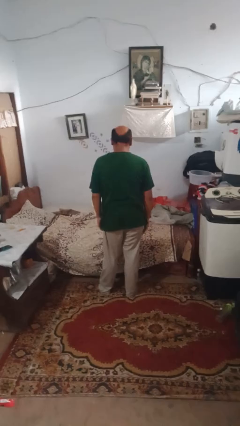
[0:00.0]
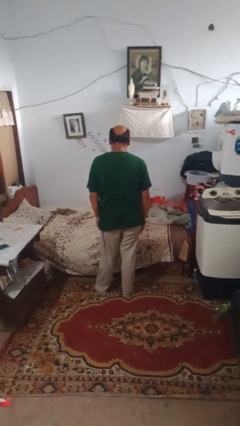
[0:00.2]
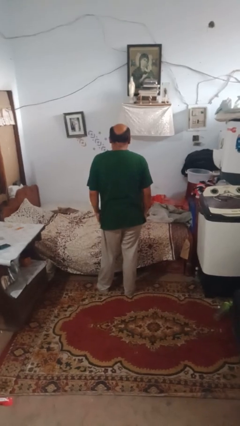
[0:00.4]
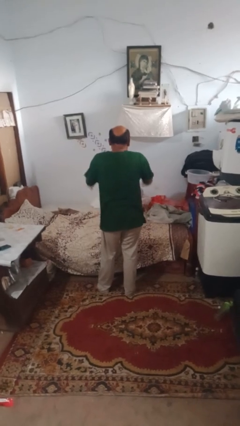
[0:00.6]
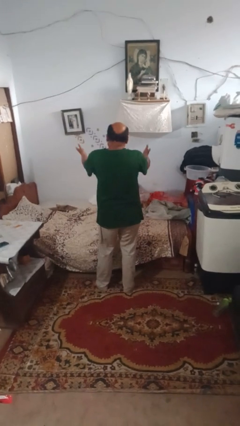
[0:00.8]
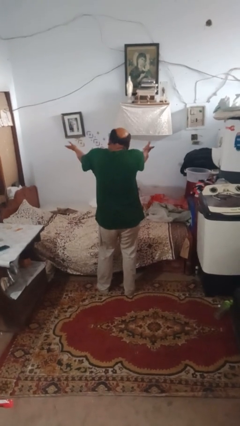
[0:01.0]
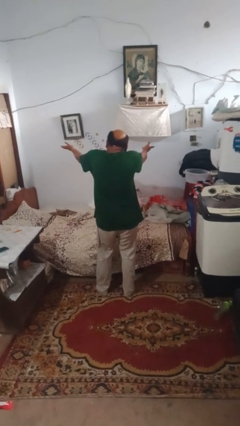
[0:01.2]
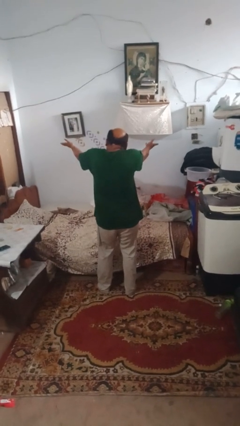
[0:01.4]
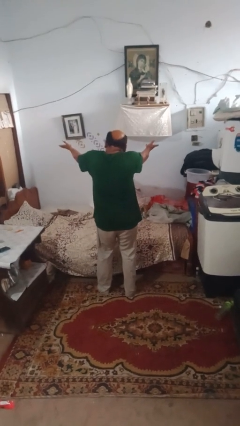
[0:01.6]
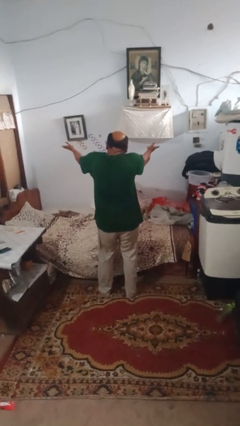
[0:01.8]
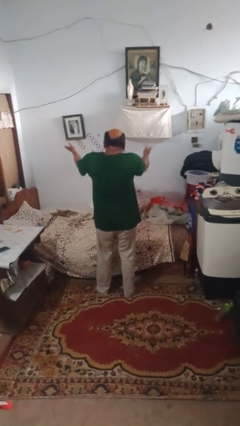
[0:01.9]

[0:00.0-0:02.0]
person shrugs

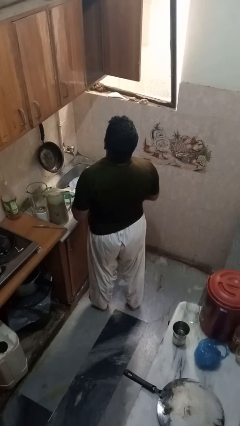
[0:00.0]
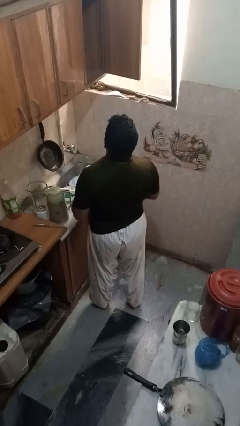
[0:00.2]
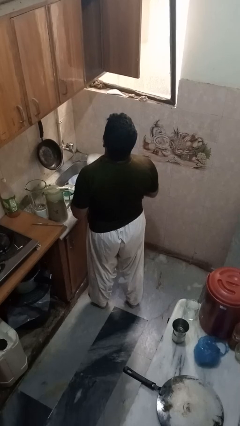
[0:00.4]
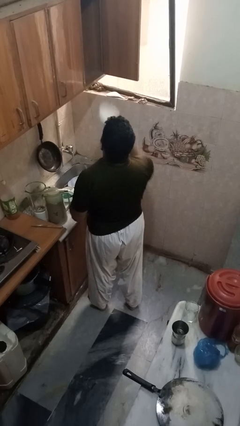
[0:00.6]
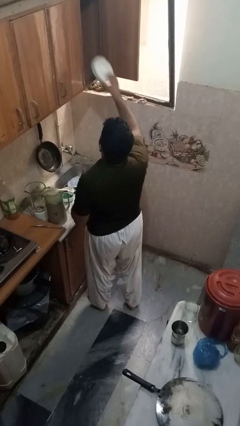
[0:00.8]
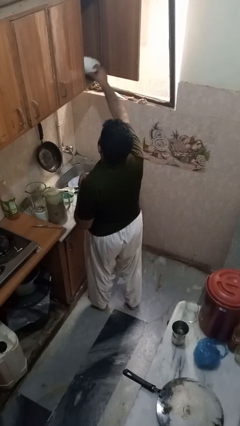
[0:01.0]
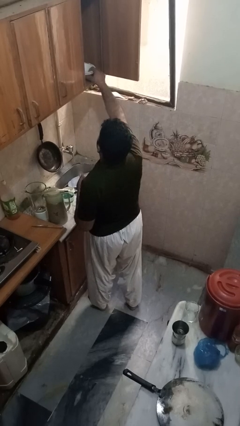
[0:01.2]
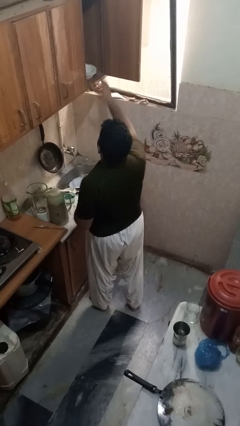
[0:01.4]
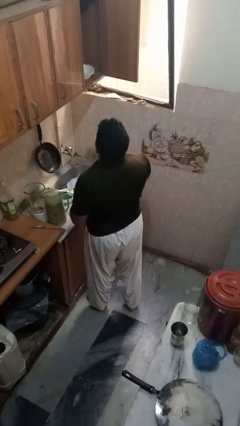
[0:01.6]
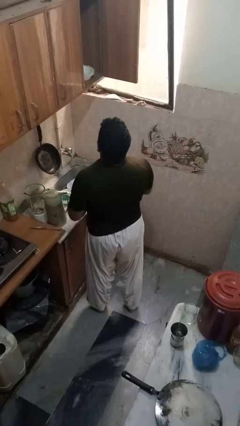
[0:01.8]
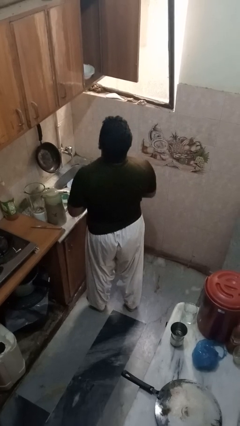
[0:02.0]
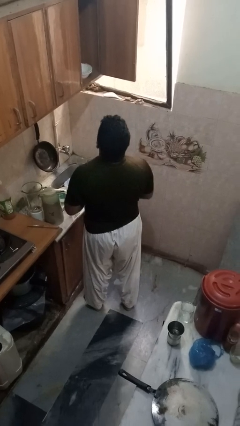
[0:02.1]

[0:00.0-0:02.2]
person puts object in cabinet

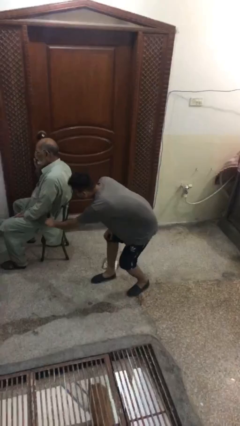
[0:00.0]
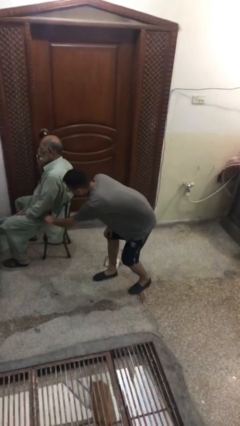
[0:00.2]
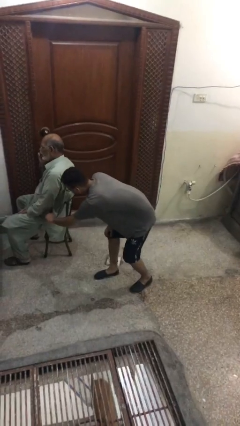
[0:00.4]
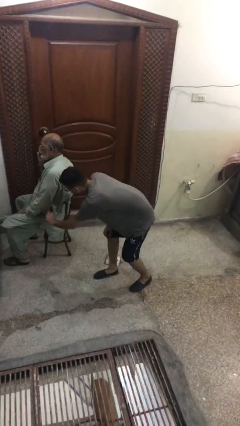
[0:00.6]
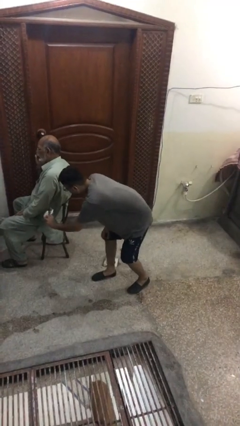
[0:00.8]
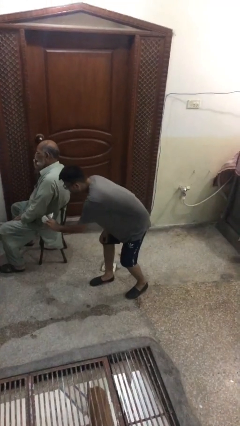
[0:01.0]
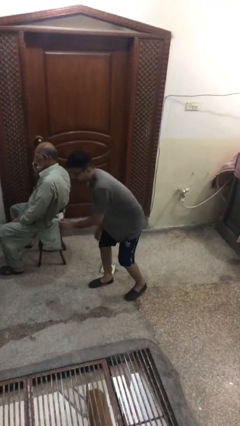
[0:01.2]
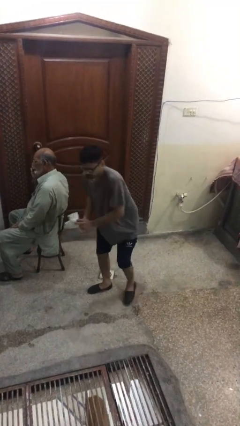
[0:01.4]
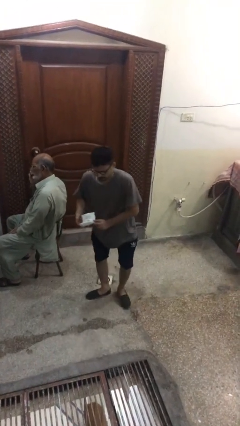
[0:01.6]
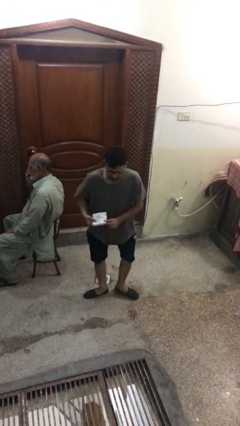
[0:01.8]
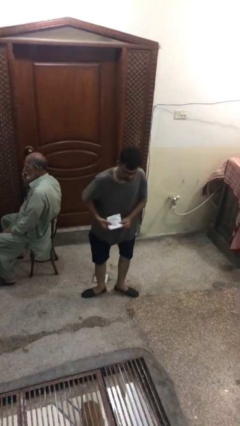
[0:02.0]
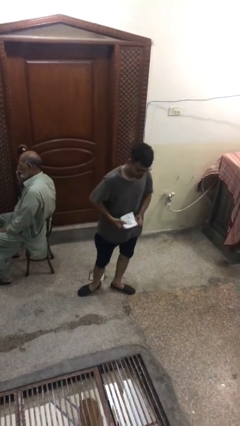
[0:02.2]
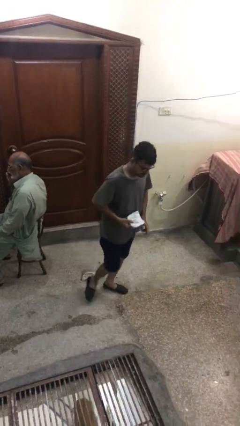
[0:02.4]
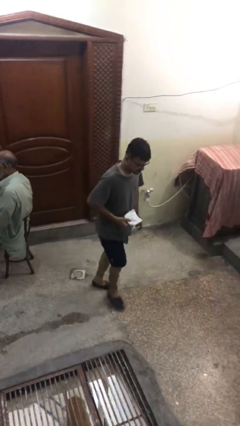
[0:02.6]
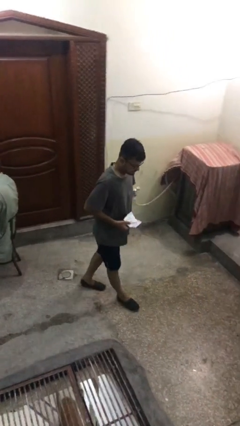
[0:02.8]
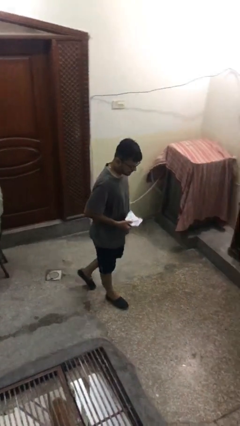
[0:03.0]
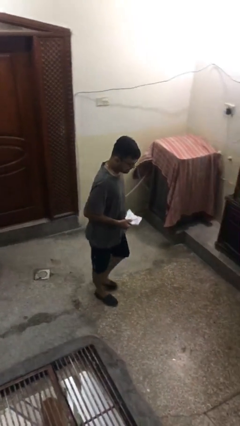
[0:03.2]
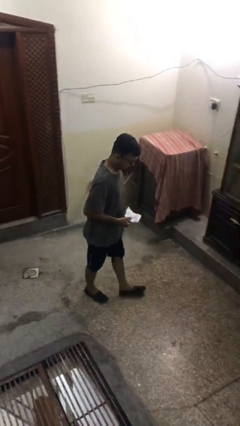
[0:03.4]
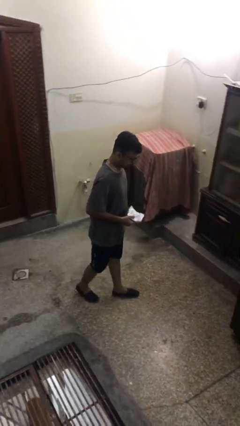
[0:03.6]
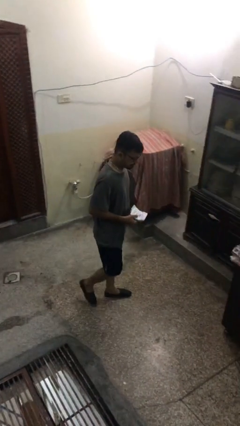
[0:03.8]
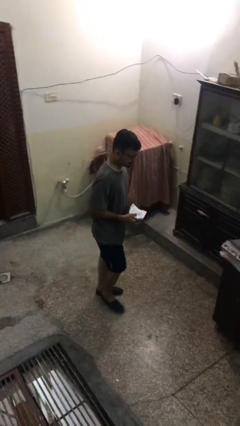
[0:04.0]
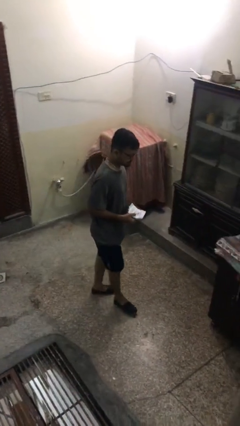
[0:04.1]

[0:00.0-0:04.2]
person steals object from person

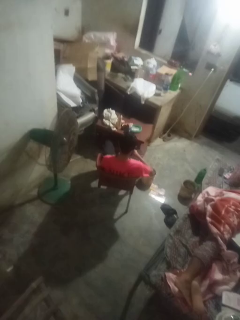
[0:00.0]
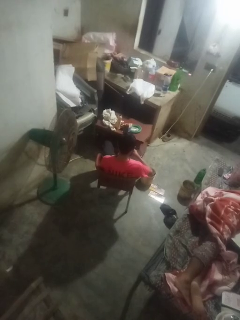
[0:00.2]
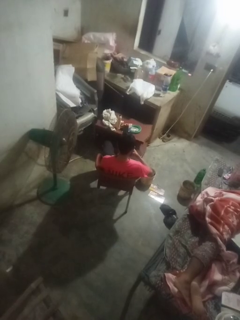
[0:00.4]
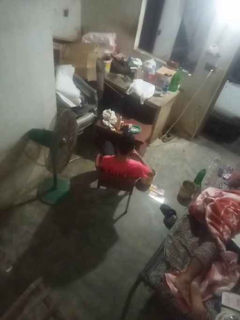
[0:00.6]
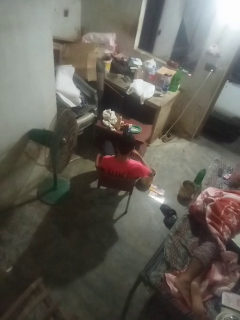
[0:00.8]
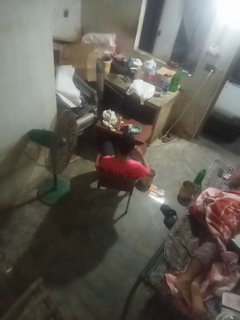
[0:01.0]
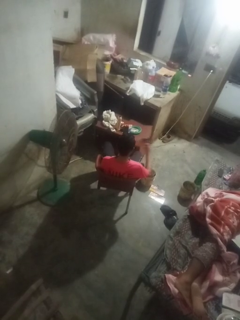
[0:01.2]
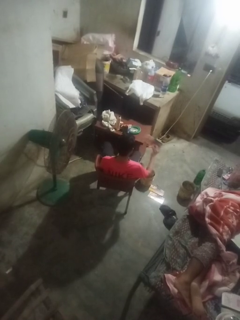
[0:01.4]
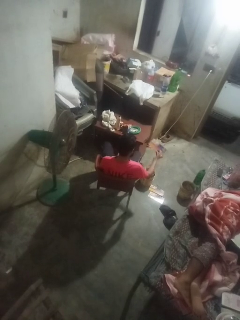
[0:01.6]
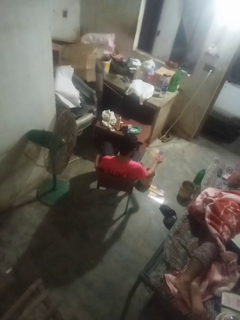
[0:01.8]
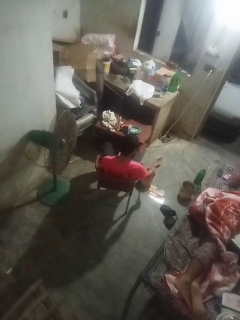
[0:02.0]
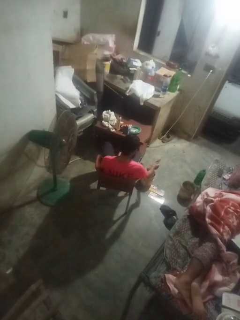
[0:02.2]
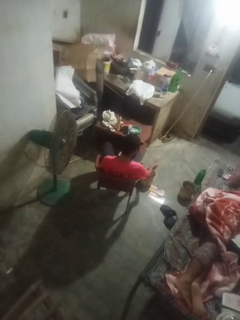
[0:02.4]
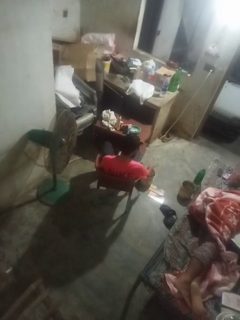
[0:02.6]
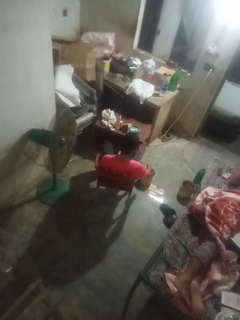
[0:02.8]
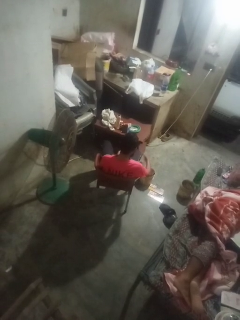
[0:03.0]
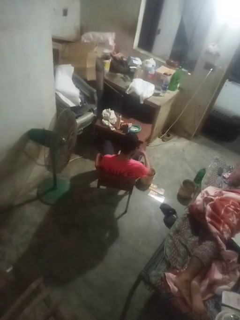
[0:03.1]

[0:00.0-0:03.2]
person discards trash

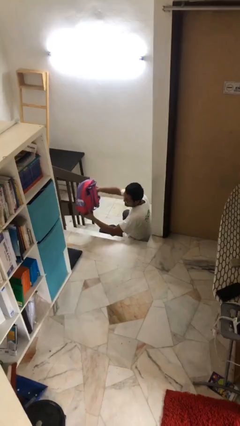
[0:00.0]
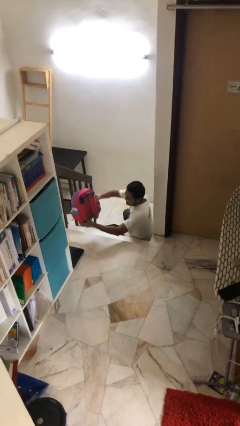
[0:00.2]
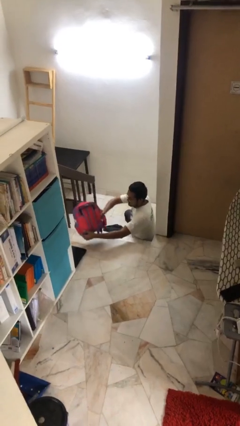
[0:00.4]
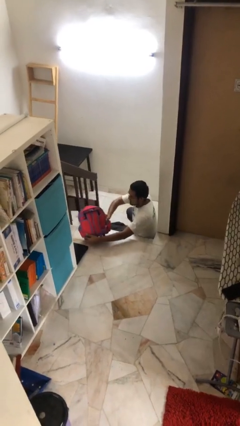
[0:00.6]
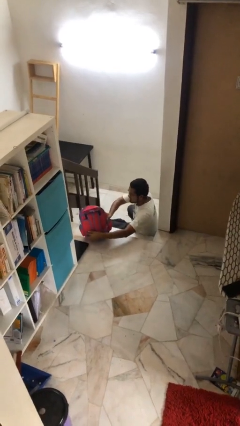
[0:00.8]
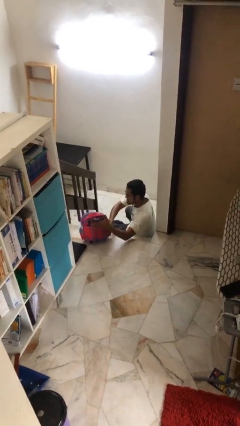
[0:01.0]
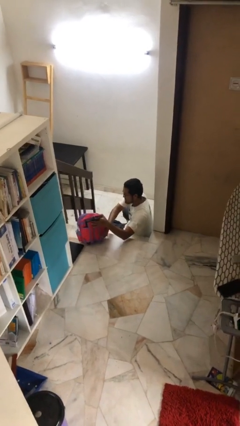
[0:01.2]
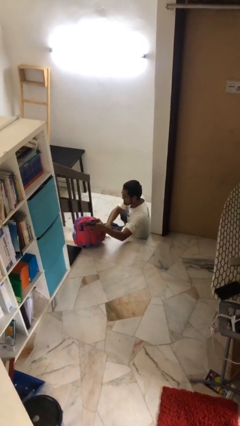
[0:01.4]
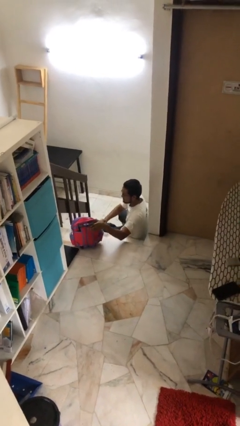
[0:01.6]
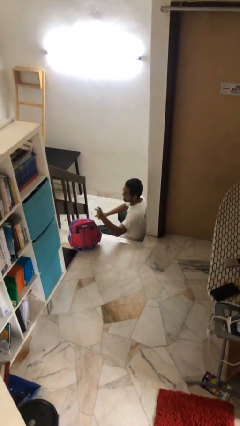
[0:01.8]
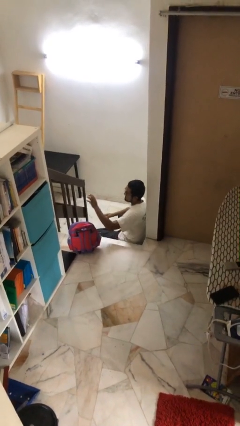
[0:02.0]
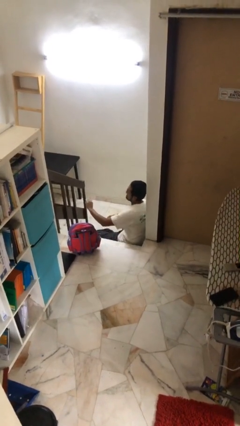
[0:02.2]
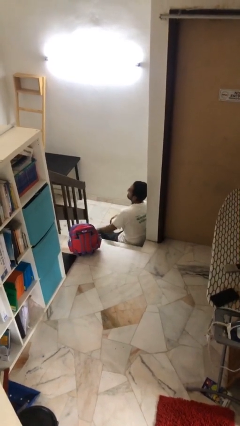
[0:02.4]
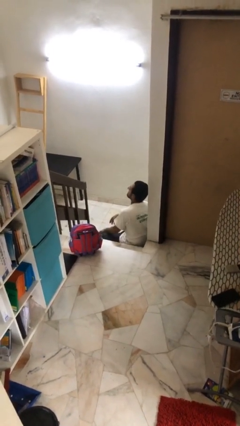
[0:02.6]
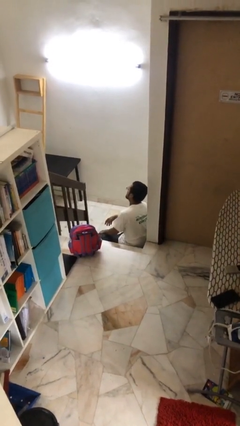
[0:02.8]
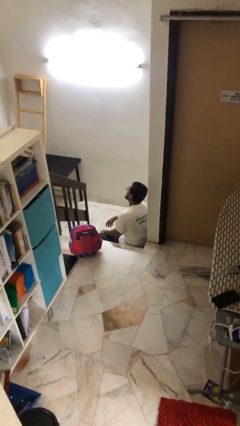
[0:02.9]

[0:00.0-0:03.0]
person puts down object on floor

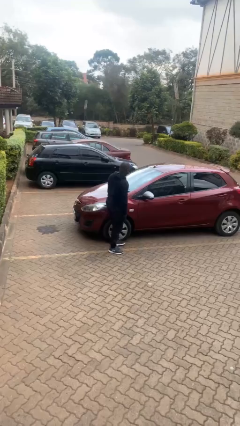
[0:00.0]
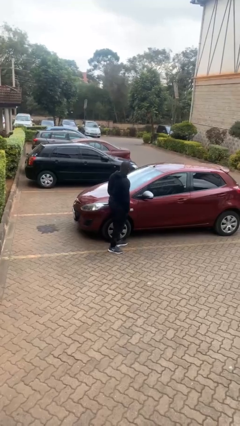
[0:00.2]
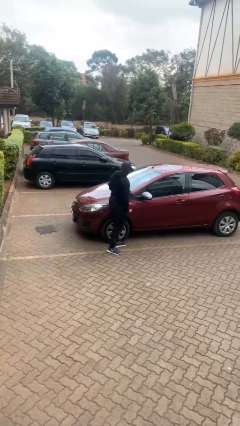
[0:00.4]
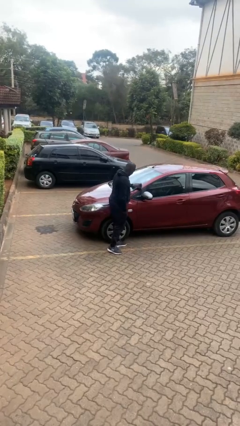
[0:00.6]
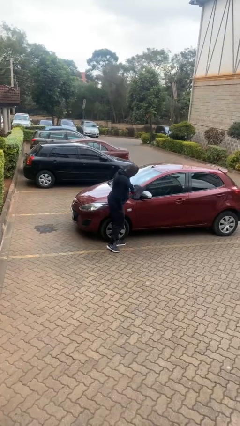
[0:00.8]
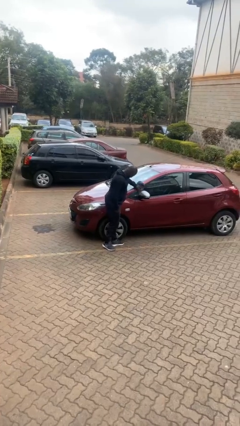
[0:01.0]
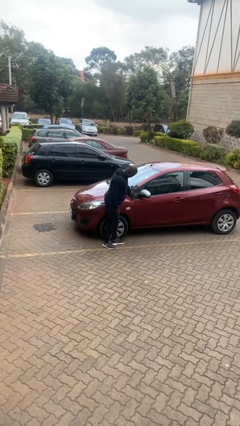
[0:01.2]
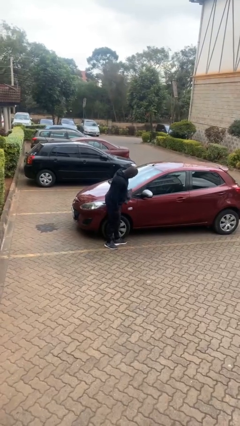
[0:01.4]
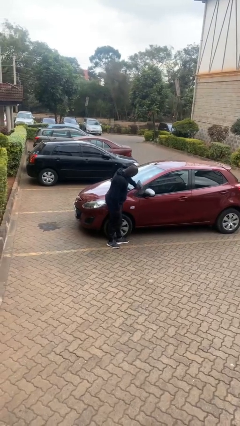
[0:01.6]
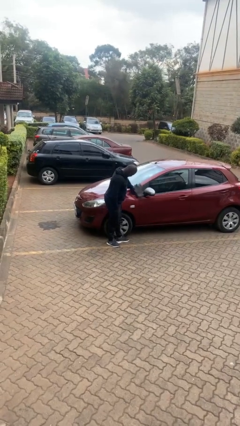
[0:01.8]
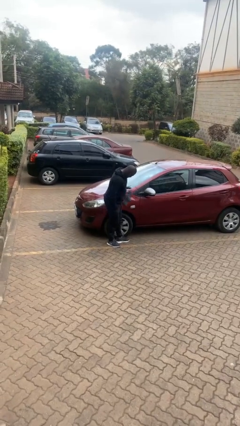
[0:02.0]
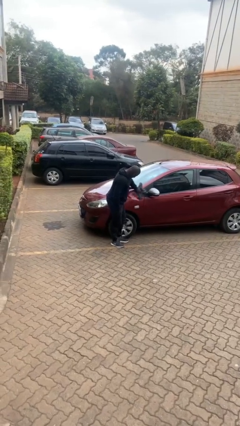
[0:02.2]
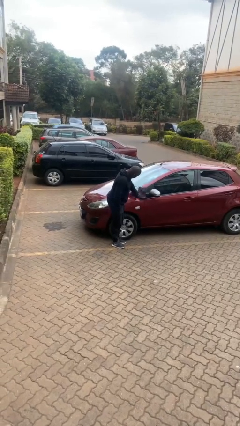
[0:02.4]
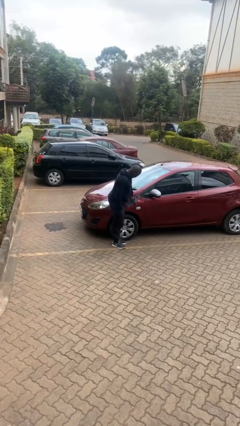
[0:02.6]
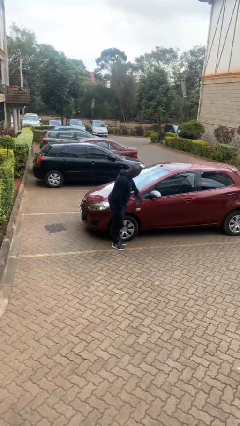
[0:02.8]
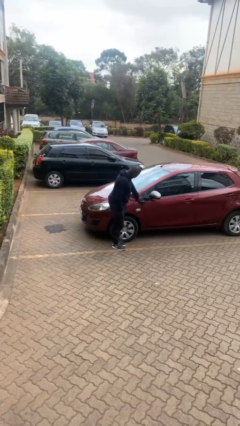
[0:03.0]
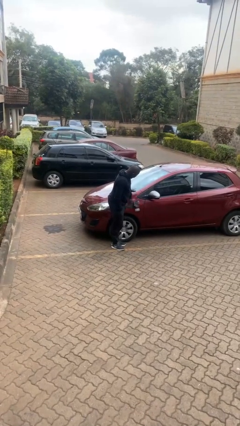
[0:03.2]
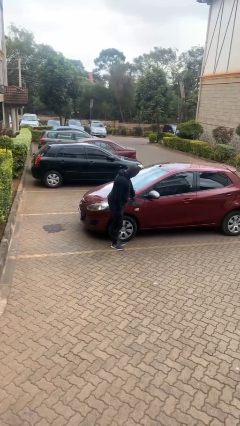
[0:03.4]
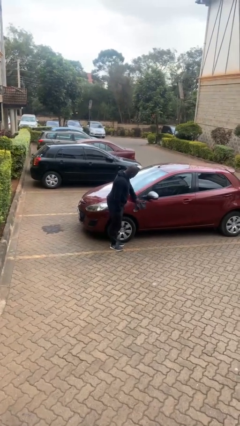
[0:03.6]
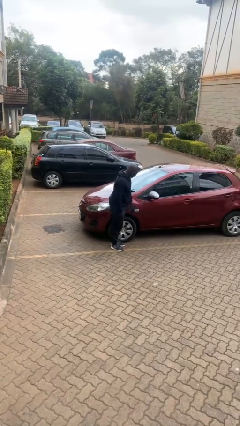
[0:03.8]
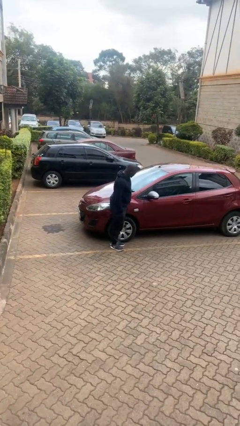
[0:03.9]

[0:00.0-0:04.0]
person polishes car with rag
